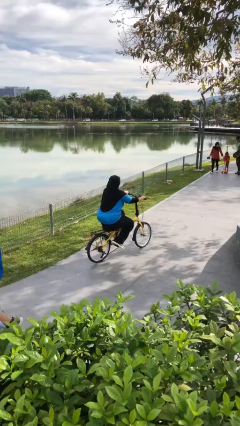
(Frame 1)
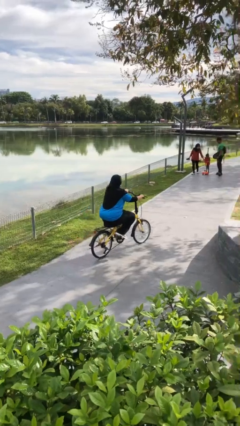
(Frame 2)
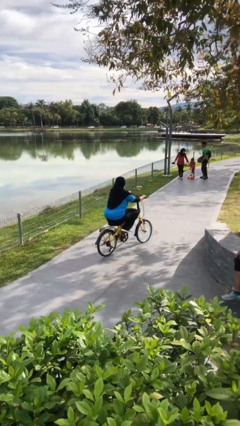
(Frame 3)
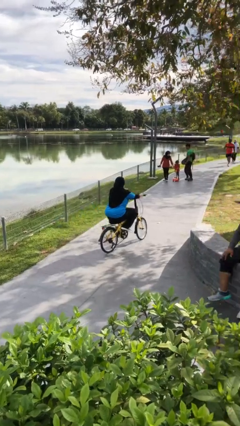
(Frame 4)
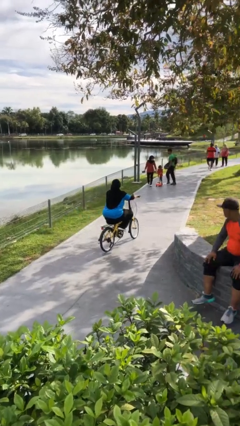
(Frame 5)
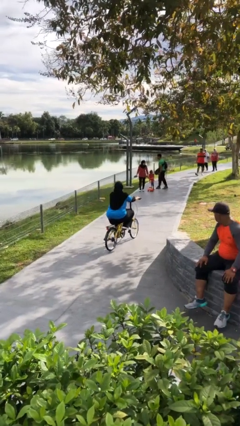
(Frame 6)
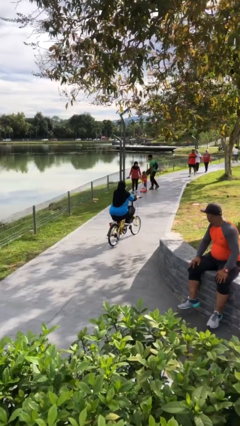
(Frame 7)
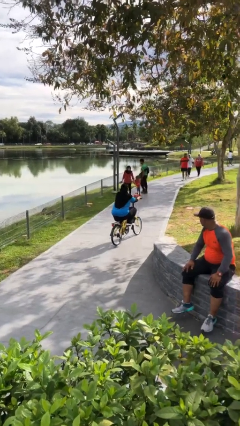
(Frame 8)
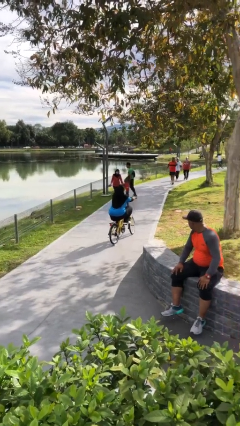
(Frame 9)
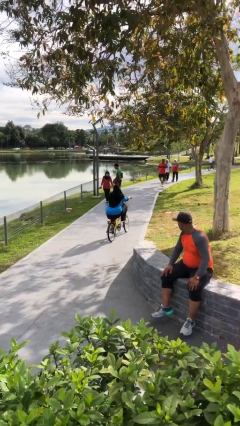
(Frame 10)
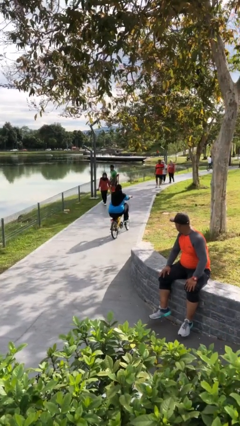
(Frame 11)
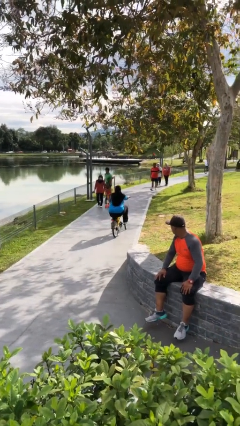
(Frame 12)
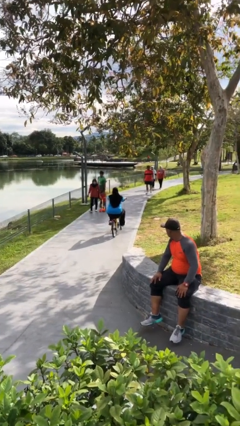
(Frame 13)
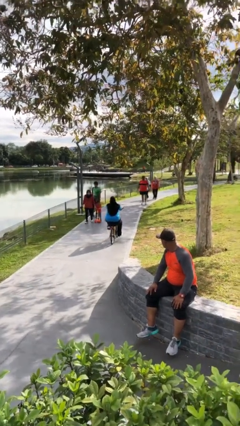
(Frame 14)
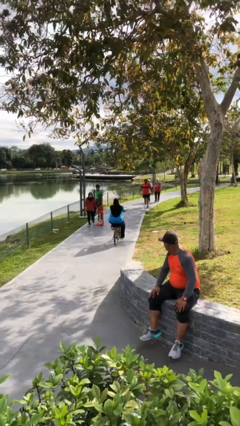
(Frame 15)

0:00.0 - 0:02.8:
person rides bicycle

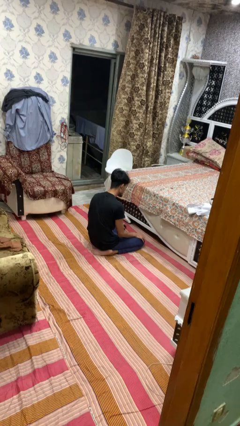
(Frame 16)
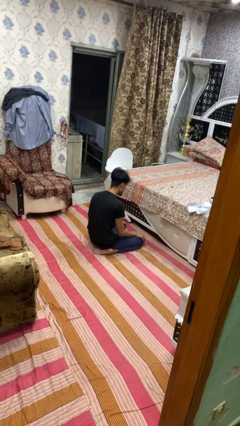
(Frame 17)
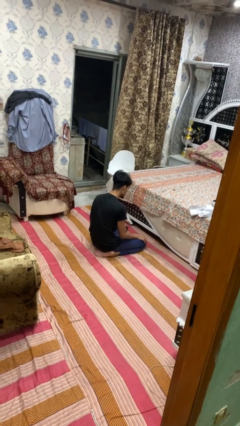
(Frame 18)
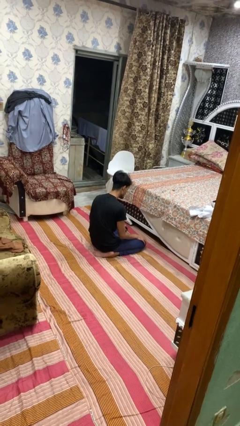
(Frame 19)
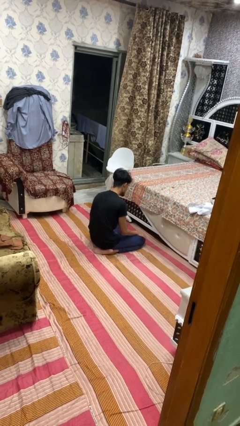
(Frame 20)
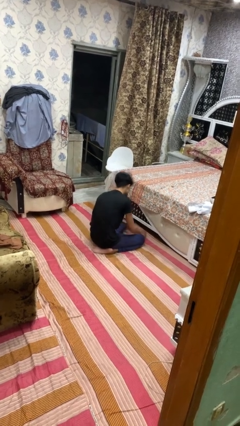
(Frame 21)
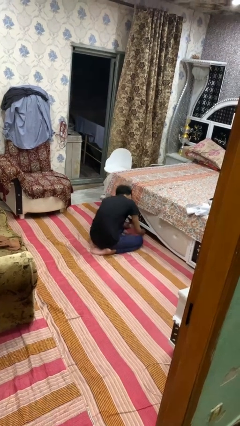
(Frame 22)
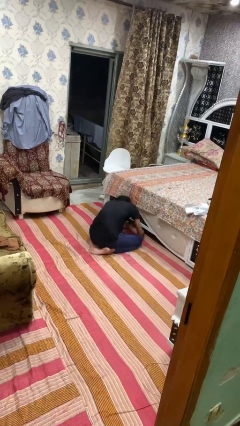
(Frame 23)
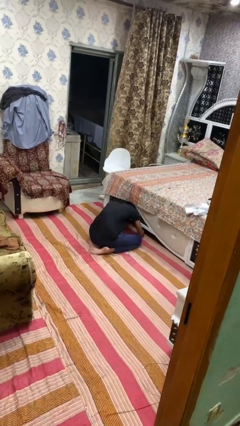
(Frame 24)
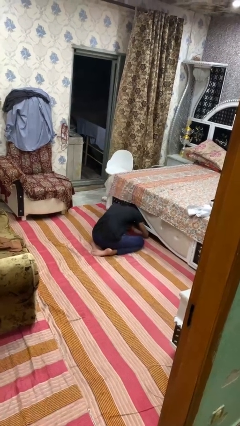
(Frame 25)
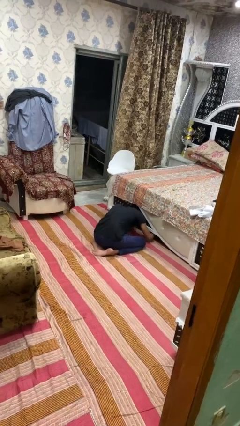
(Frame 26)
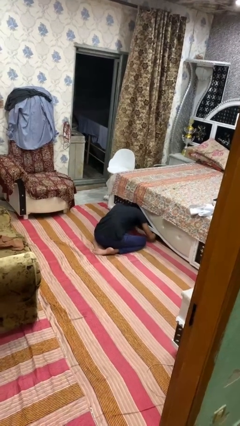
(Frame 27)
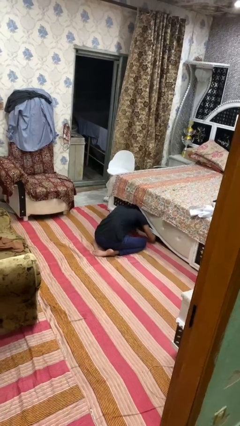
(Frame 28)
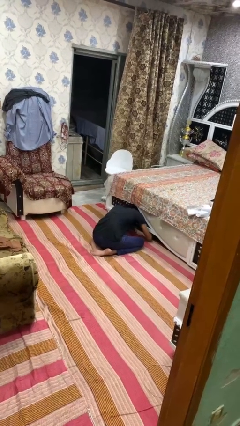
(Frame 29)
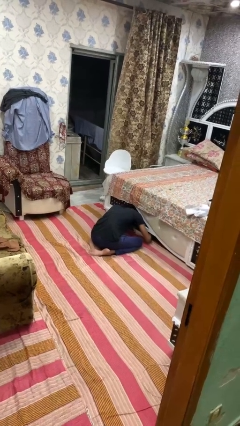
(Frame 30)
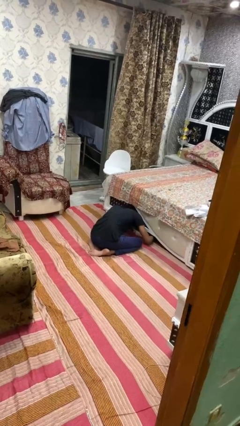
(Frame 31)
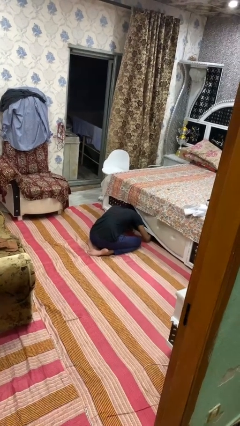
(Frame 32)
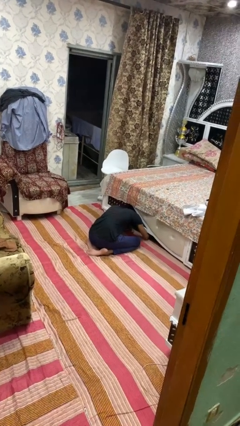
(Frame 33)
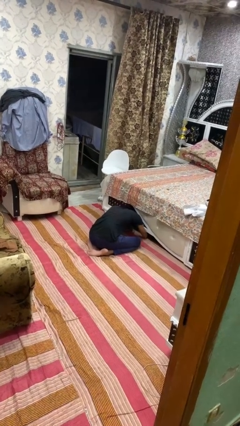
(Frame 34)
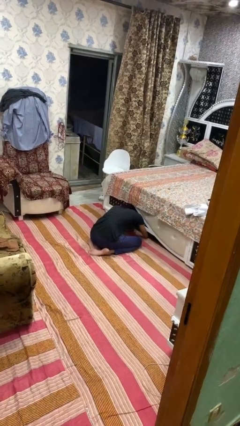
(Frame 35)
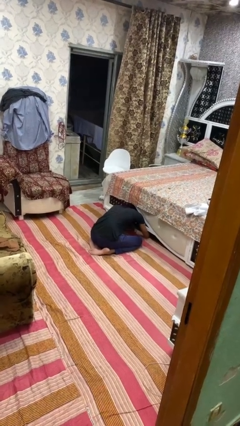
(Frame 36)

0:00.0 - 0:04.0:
person searches under bed

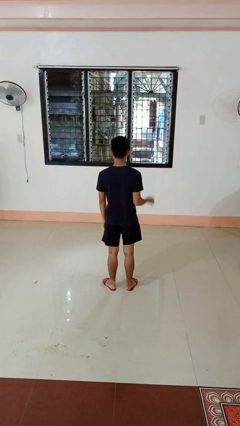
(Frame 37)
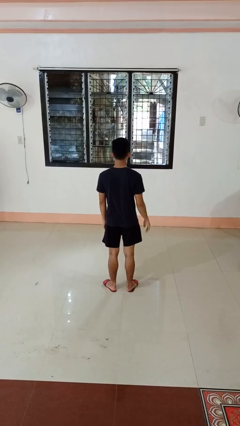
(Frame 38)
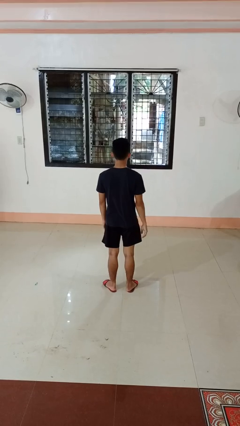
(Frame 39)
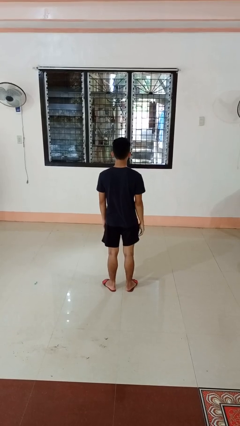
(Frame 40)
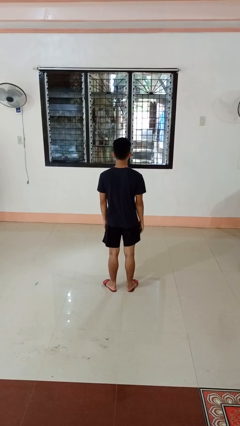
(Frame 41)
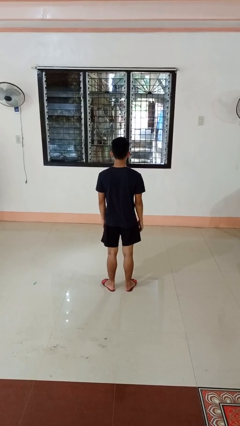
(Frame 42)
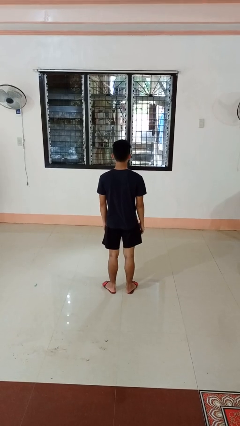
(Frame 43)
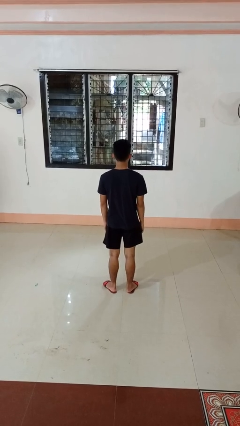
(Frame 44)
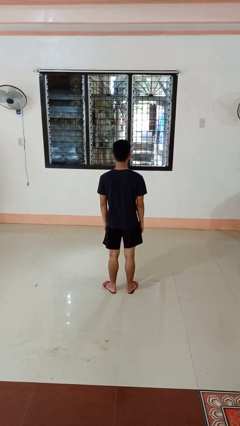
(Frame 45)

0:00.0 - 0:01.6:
person gestures lower hand

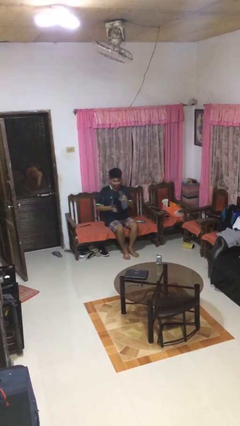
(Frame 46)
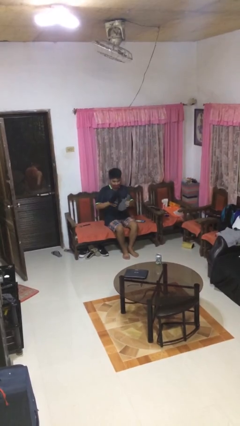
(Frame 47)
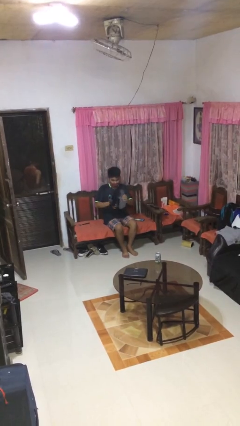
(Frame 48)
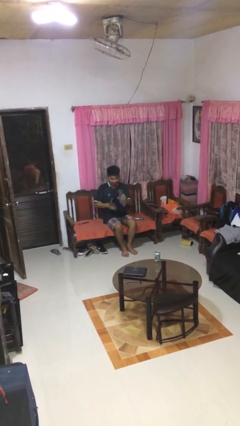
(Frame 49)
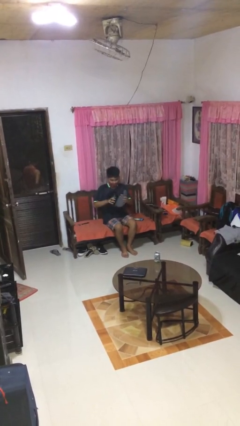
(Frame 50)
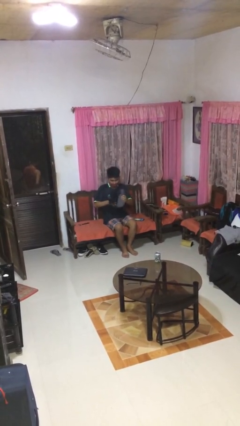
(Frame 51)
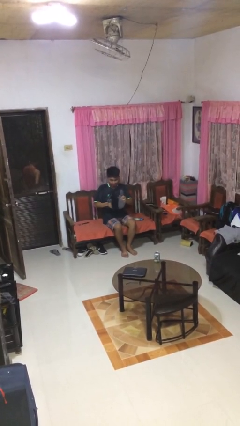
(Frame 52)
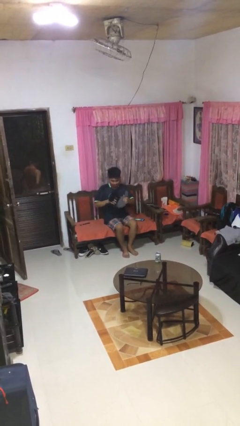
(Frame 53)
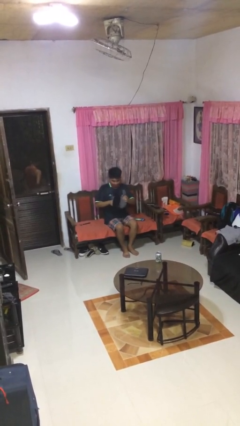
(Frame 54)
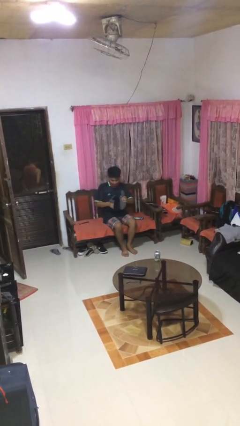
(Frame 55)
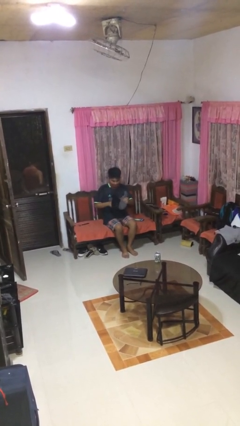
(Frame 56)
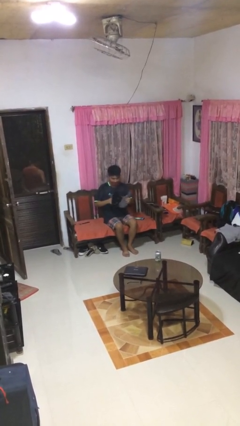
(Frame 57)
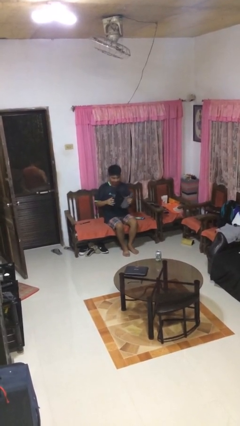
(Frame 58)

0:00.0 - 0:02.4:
person squeezes object

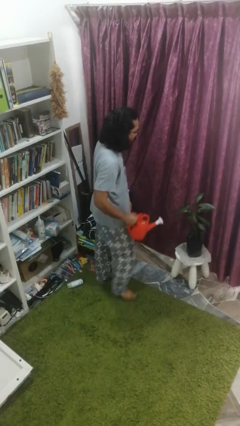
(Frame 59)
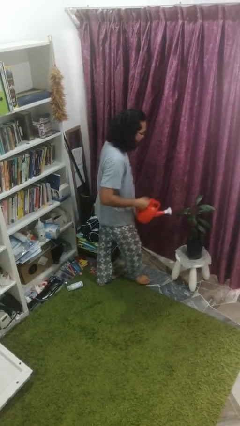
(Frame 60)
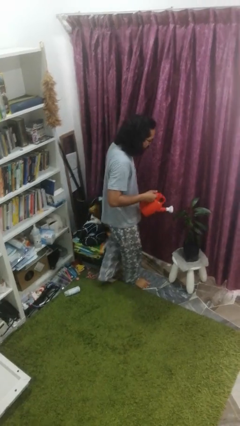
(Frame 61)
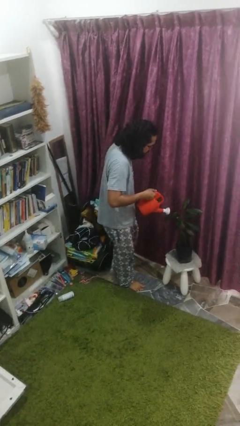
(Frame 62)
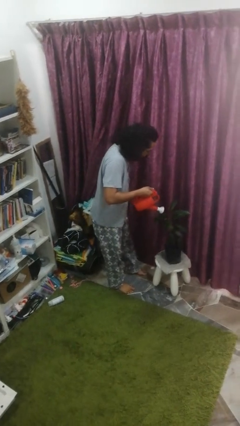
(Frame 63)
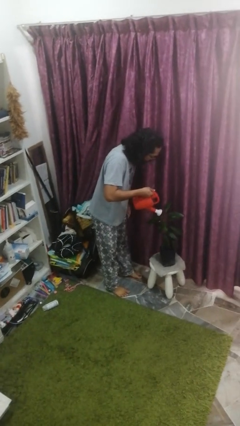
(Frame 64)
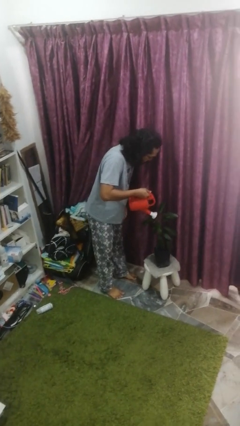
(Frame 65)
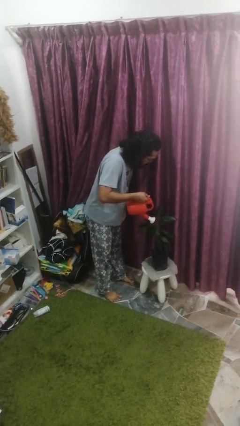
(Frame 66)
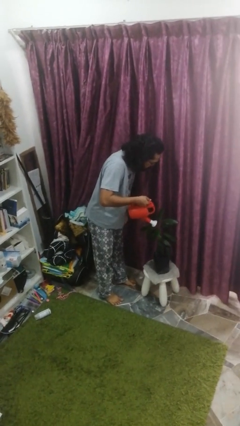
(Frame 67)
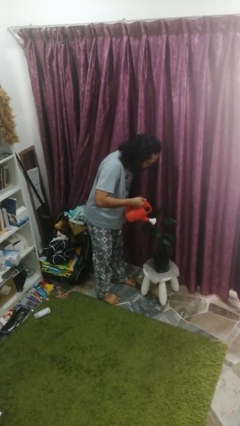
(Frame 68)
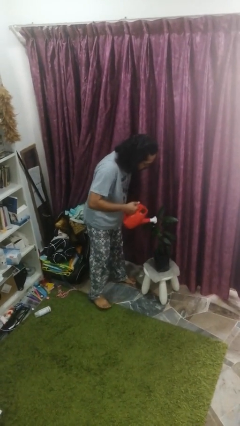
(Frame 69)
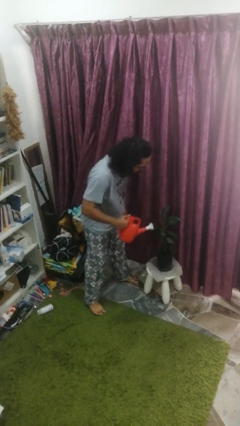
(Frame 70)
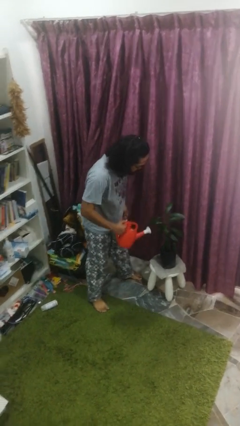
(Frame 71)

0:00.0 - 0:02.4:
person waters houseplant

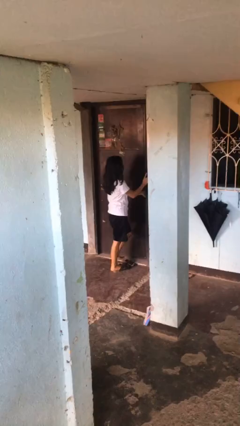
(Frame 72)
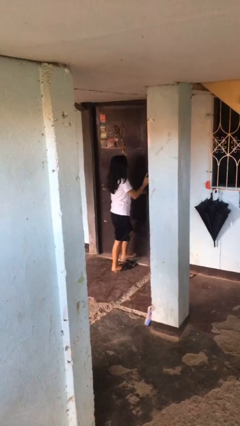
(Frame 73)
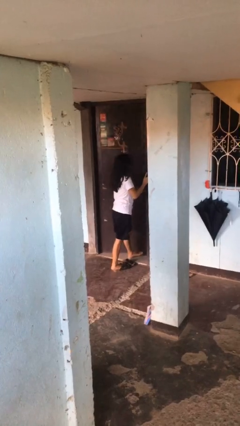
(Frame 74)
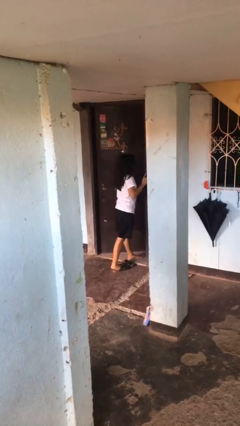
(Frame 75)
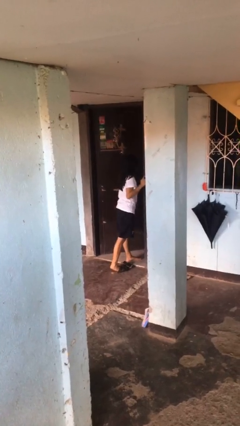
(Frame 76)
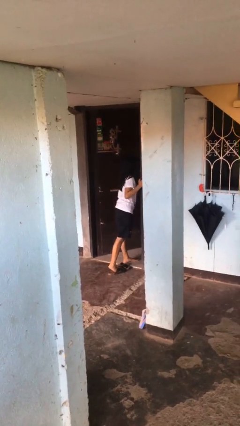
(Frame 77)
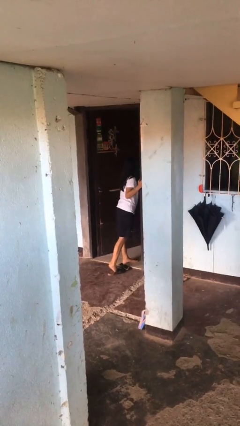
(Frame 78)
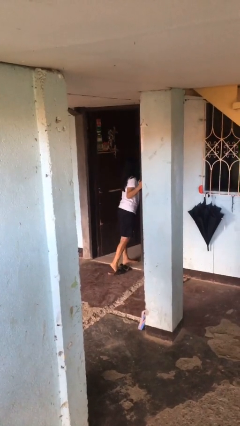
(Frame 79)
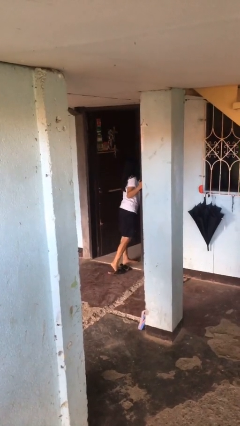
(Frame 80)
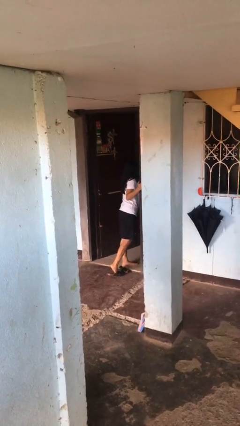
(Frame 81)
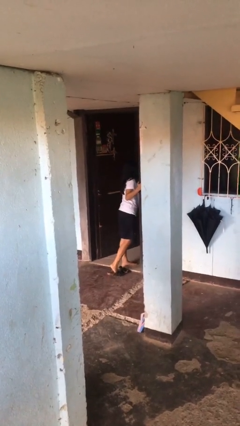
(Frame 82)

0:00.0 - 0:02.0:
person opens facility door

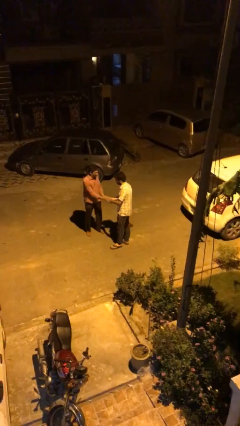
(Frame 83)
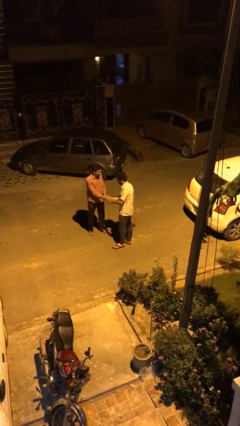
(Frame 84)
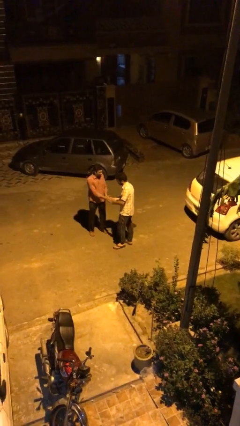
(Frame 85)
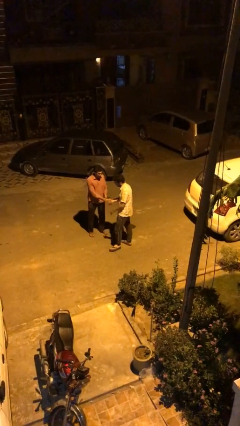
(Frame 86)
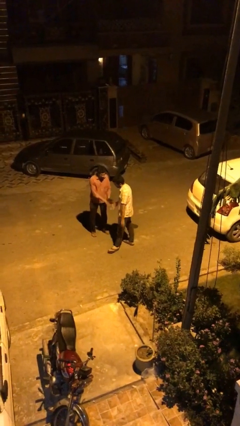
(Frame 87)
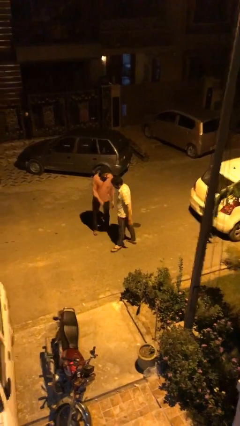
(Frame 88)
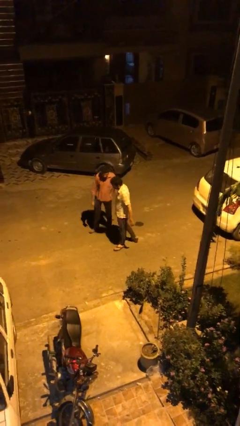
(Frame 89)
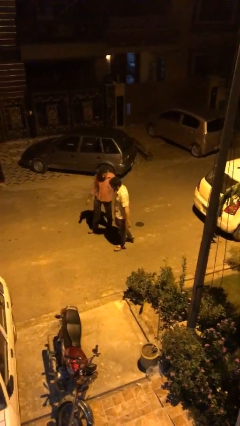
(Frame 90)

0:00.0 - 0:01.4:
person shakes hand

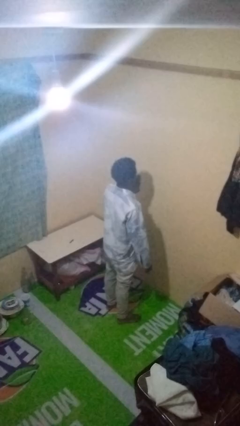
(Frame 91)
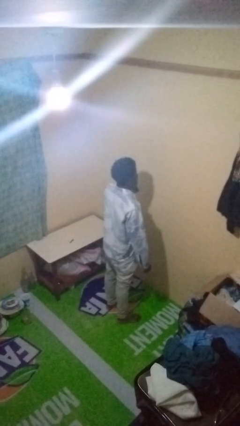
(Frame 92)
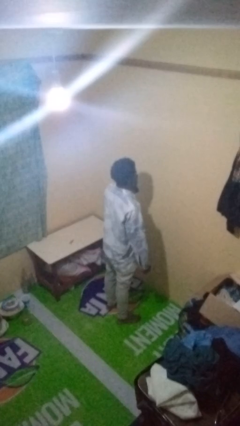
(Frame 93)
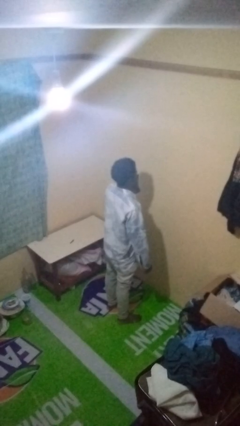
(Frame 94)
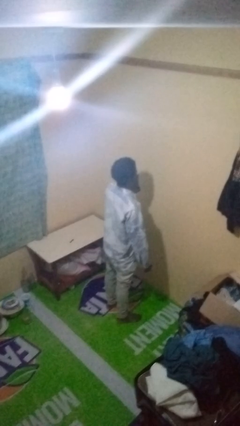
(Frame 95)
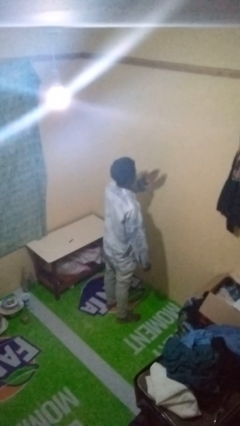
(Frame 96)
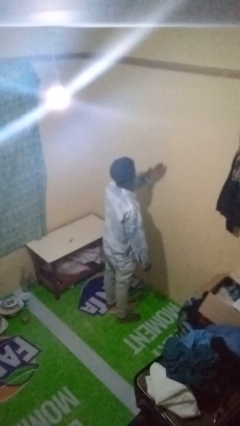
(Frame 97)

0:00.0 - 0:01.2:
person gestures blow kiss
